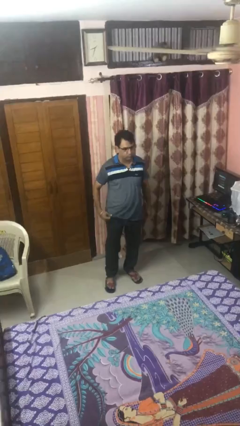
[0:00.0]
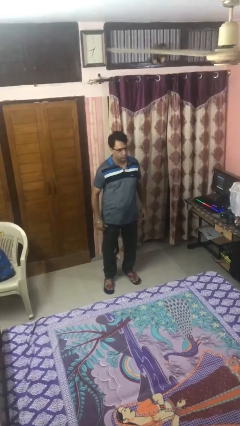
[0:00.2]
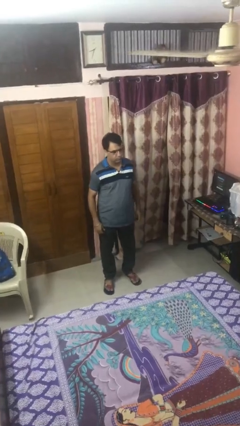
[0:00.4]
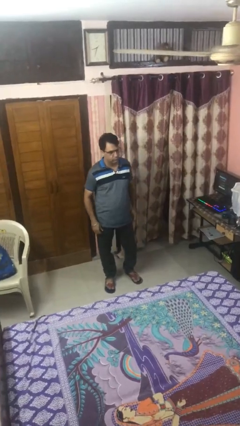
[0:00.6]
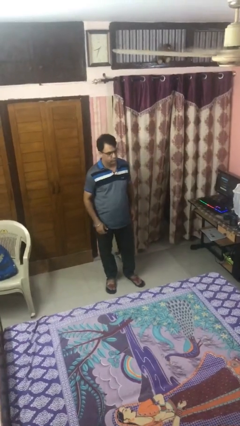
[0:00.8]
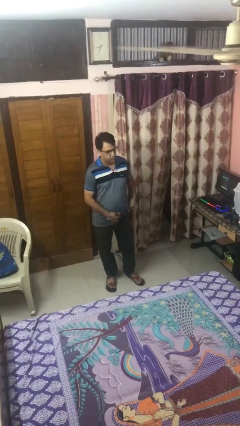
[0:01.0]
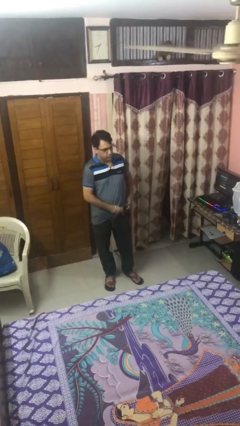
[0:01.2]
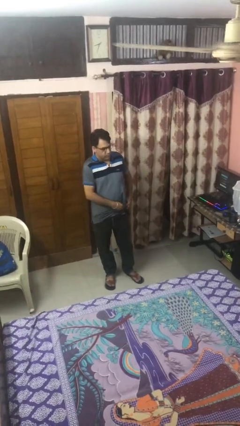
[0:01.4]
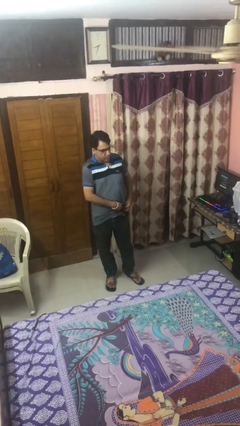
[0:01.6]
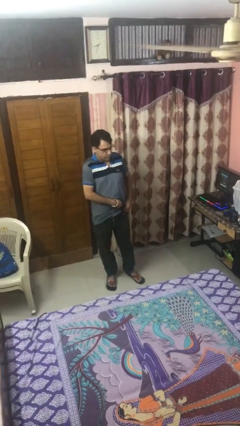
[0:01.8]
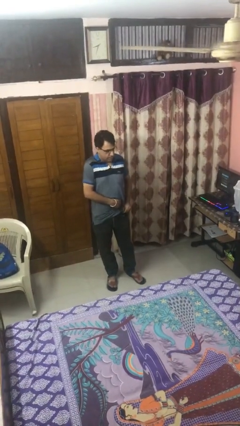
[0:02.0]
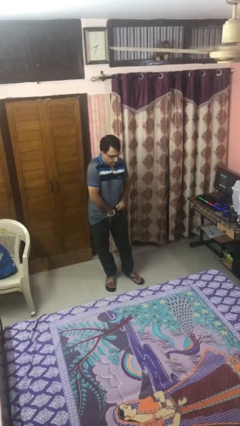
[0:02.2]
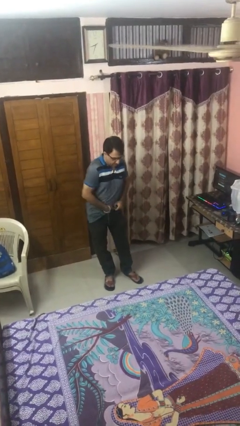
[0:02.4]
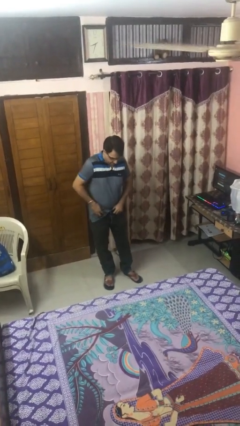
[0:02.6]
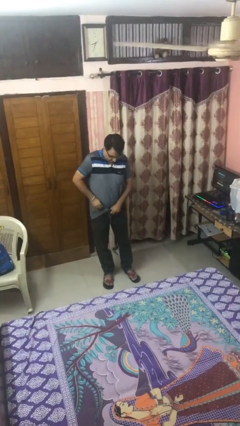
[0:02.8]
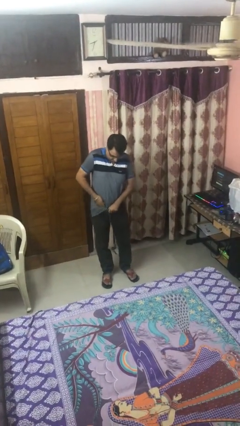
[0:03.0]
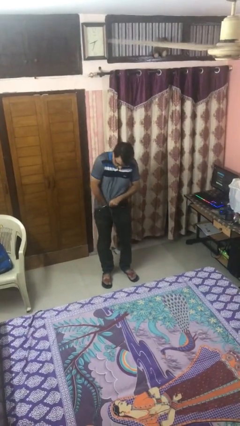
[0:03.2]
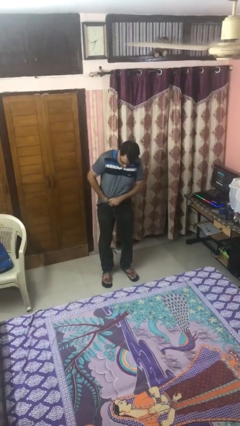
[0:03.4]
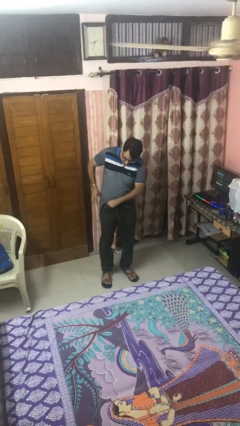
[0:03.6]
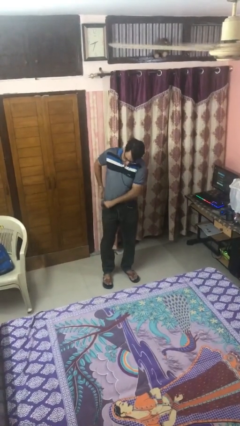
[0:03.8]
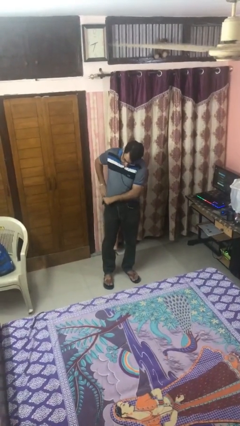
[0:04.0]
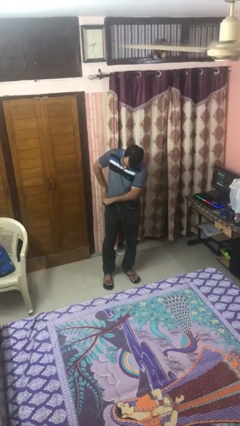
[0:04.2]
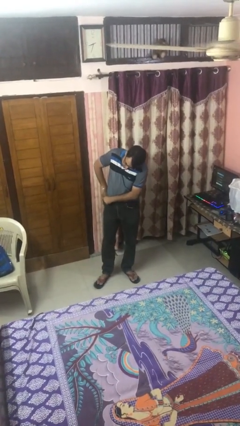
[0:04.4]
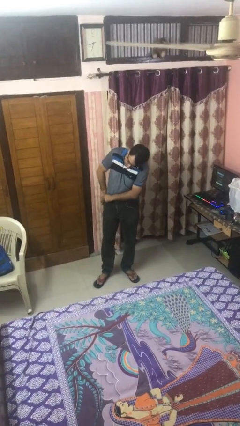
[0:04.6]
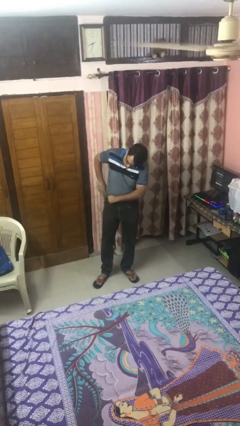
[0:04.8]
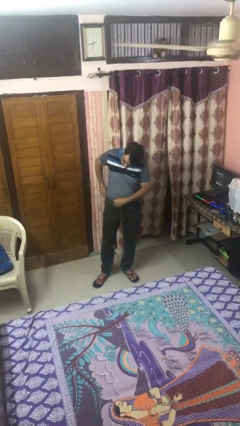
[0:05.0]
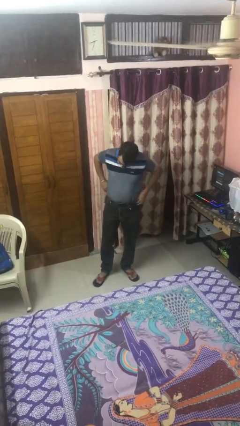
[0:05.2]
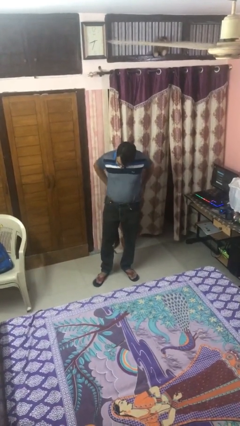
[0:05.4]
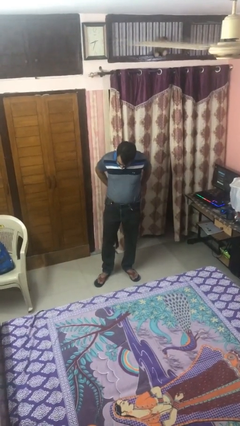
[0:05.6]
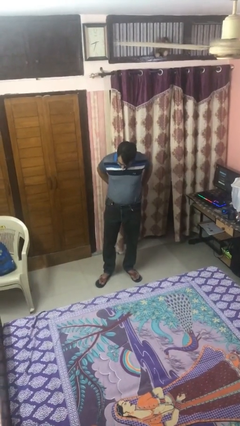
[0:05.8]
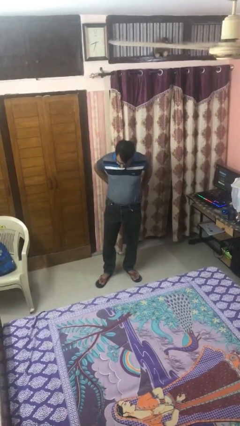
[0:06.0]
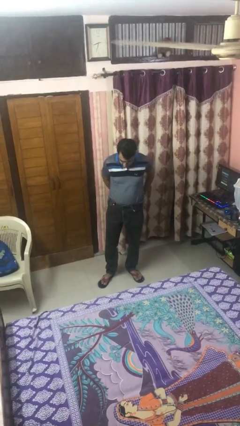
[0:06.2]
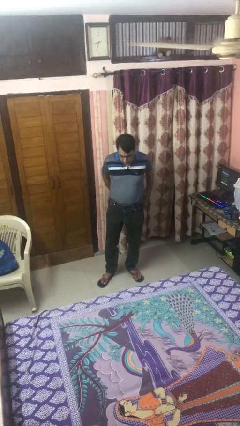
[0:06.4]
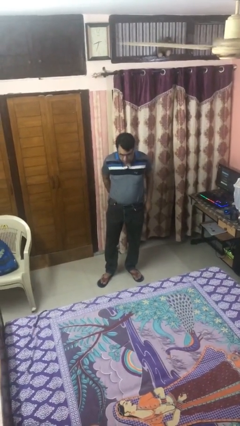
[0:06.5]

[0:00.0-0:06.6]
person tucks in shirt

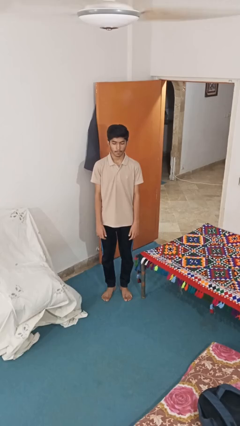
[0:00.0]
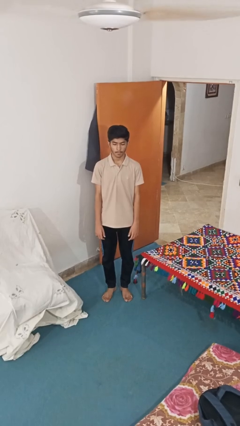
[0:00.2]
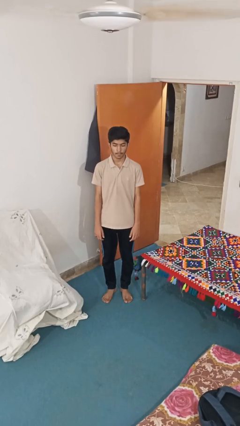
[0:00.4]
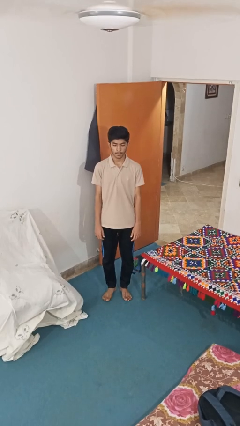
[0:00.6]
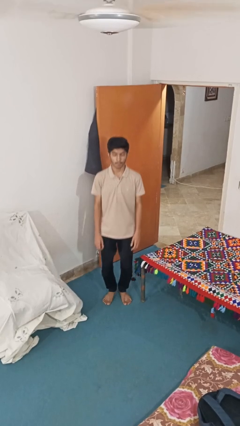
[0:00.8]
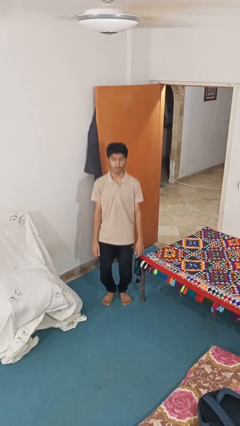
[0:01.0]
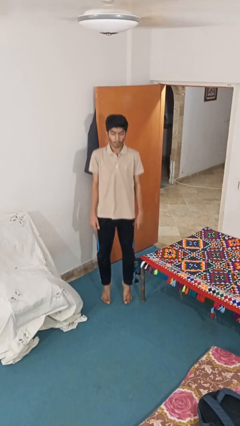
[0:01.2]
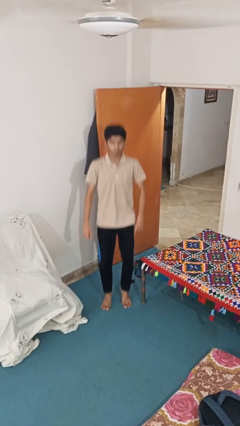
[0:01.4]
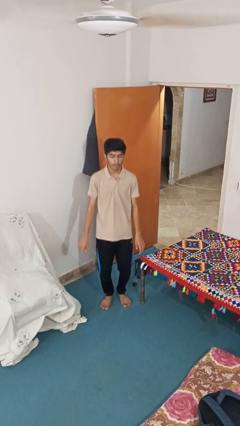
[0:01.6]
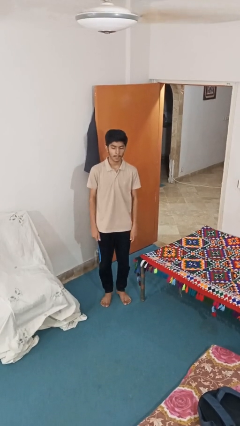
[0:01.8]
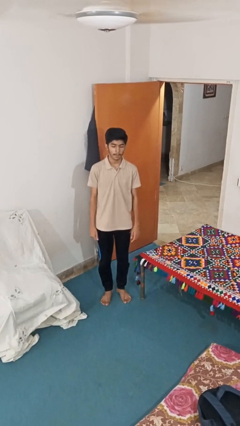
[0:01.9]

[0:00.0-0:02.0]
person jumps

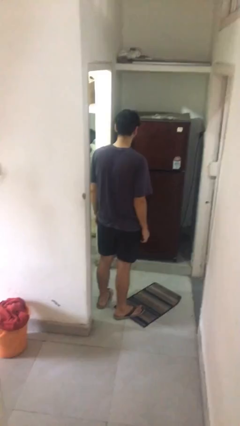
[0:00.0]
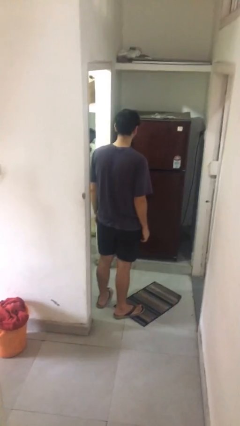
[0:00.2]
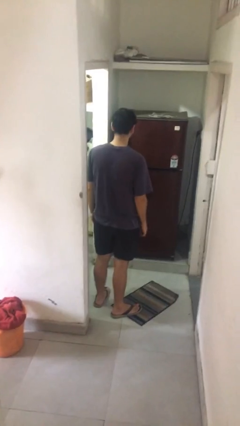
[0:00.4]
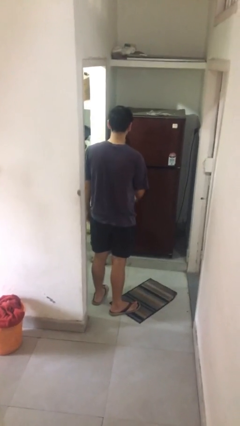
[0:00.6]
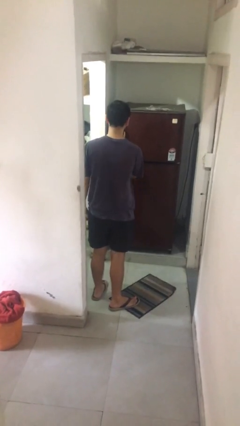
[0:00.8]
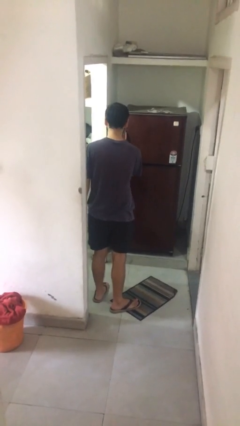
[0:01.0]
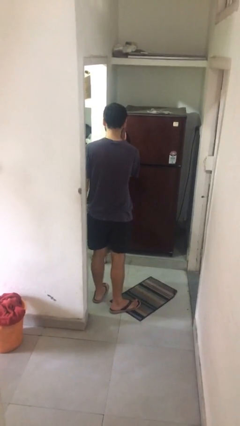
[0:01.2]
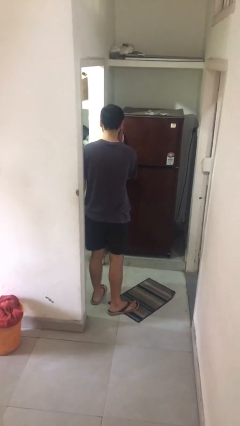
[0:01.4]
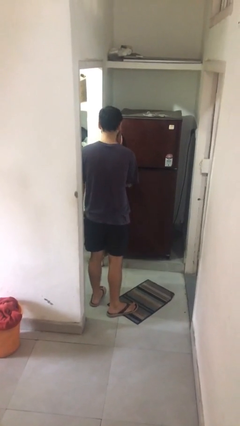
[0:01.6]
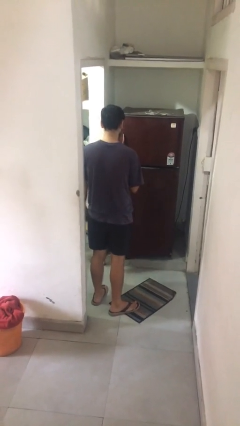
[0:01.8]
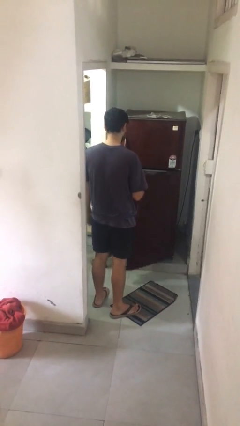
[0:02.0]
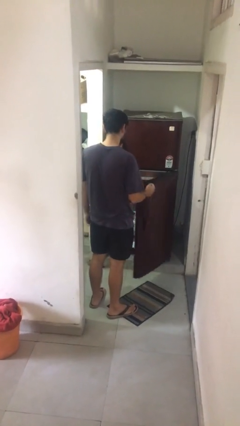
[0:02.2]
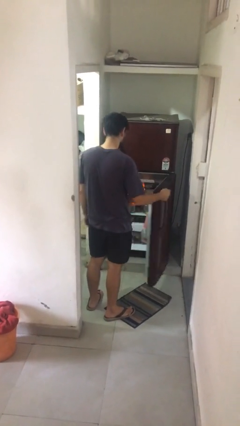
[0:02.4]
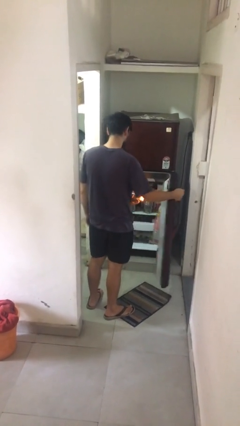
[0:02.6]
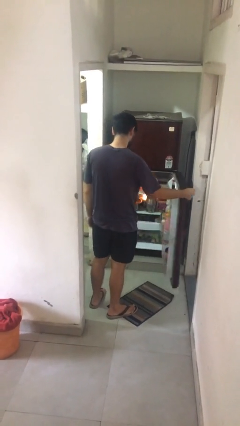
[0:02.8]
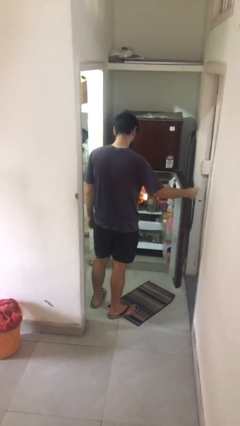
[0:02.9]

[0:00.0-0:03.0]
person opens refrigerator

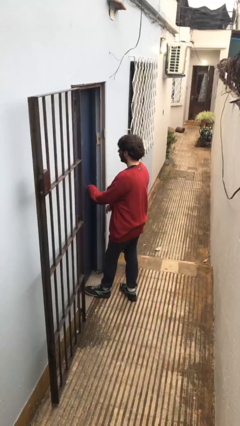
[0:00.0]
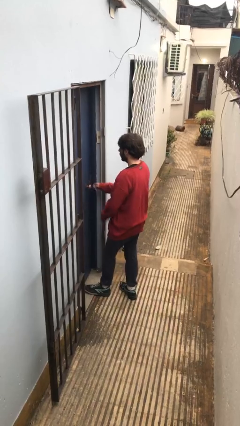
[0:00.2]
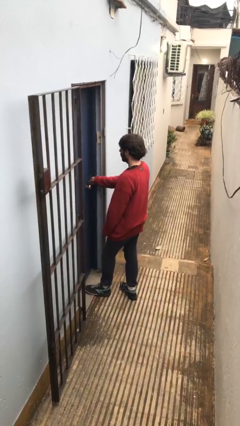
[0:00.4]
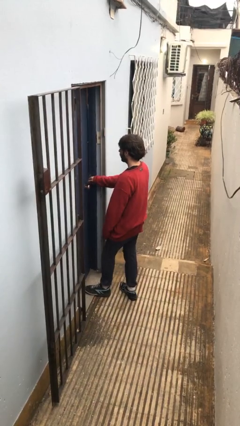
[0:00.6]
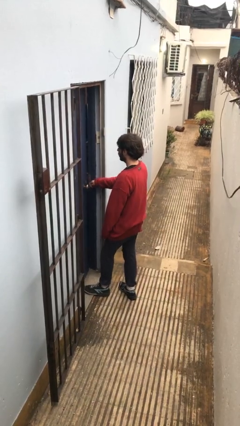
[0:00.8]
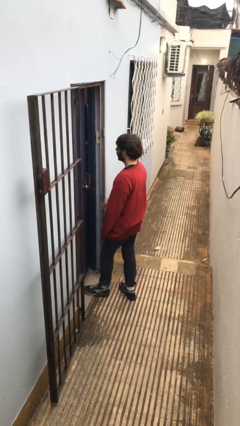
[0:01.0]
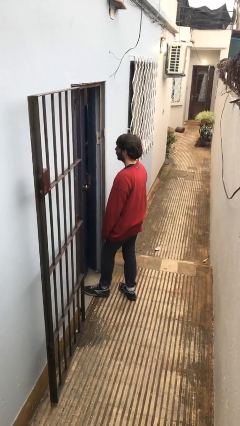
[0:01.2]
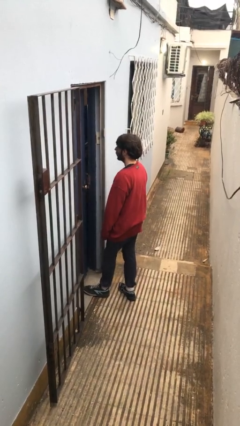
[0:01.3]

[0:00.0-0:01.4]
person locks door with keys

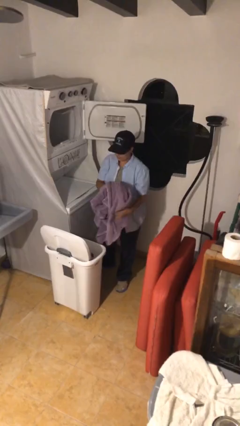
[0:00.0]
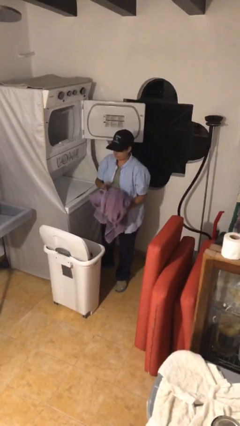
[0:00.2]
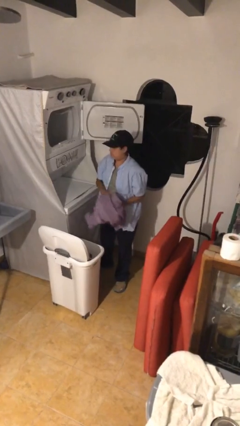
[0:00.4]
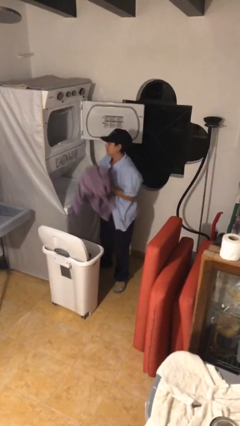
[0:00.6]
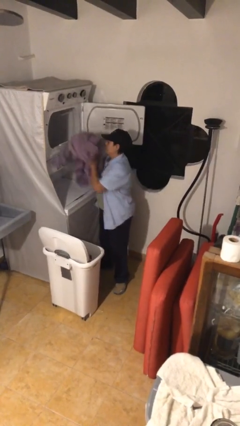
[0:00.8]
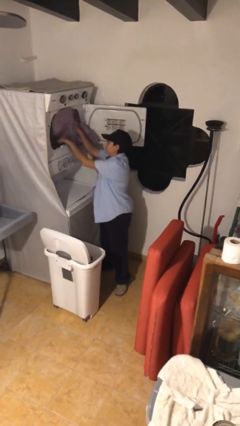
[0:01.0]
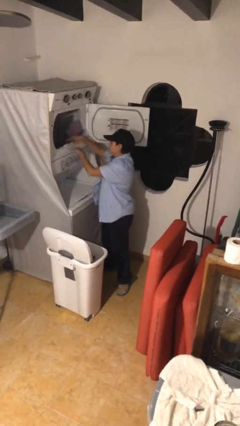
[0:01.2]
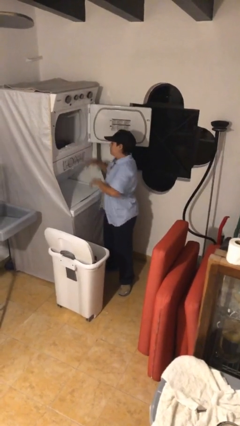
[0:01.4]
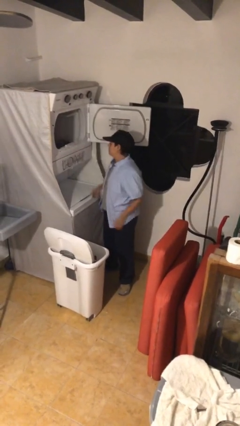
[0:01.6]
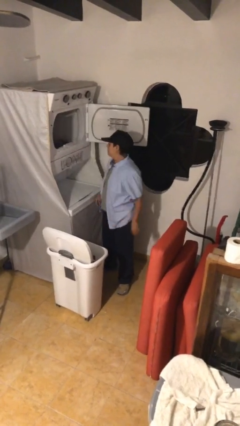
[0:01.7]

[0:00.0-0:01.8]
person loads dryer

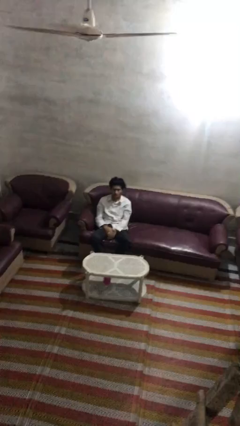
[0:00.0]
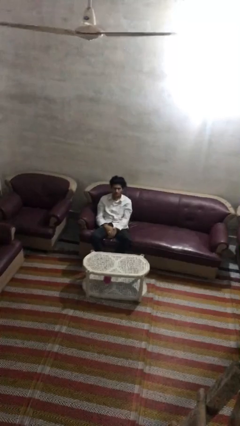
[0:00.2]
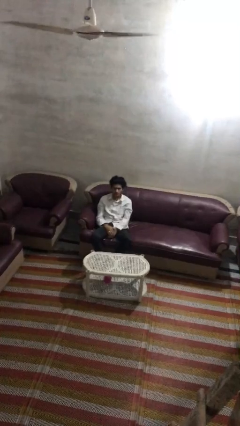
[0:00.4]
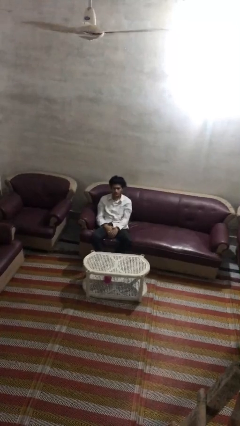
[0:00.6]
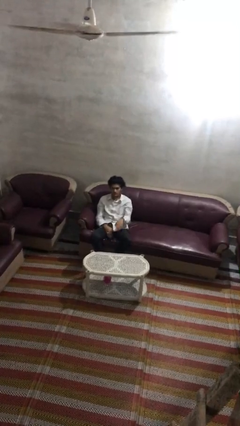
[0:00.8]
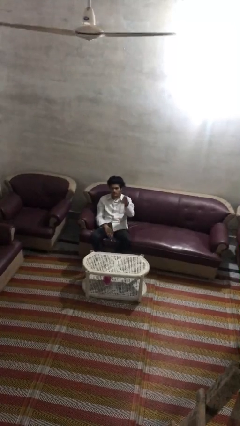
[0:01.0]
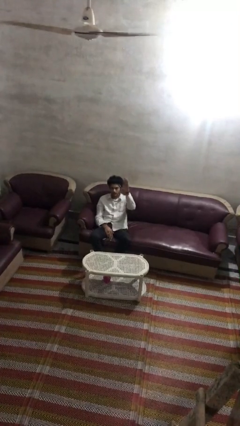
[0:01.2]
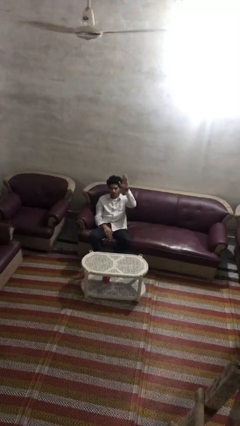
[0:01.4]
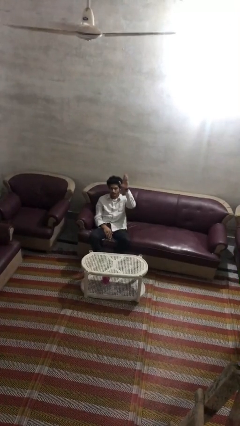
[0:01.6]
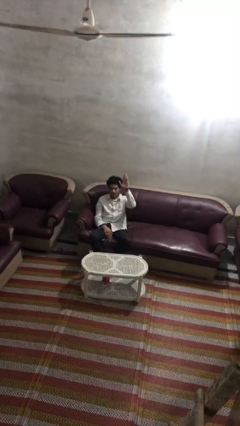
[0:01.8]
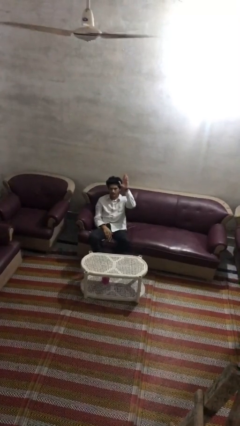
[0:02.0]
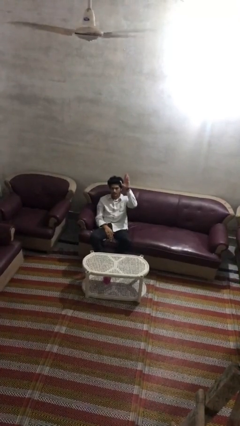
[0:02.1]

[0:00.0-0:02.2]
person gestures raise hand

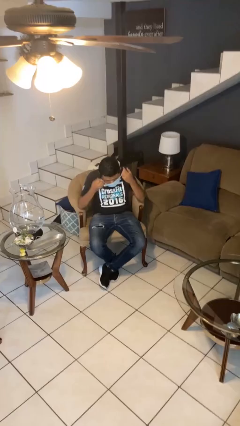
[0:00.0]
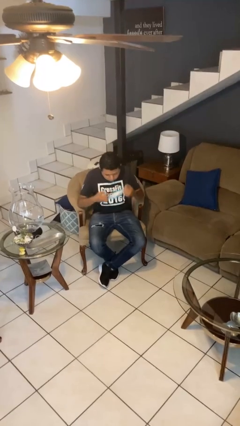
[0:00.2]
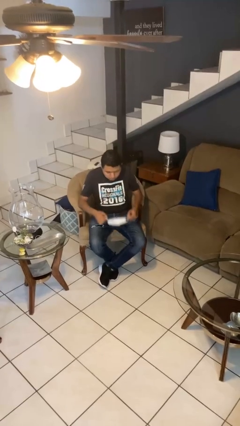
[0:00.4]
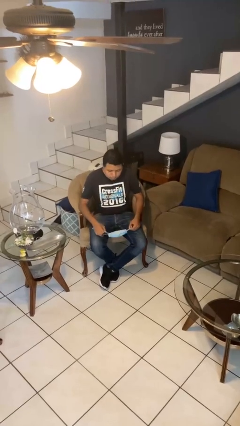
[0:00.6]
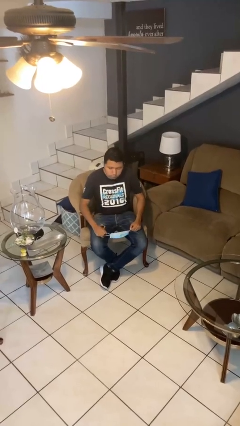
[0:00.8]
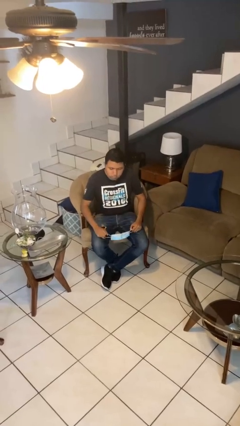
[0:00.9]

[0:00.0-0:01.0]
person takes off facemask
